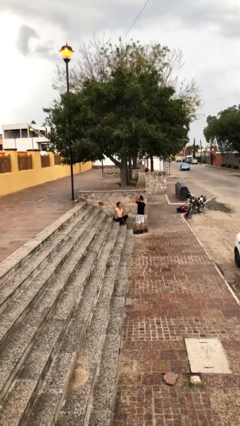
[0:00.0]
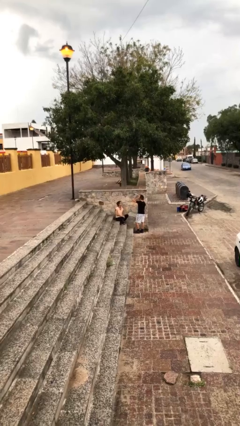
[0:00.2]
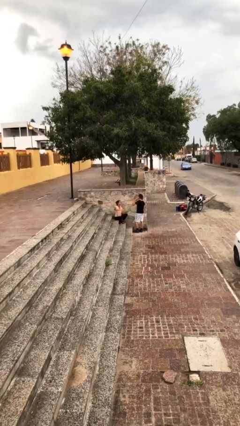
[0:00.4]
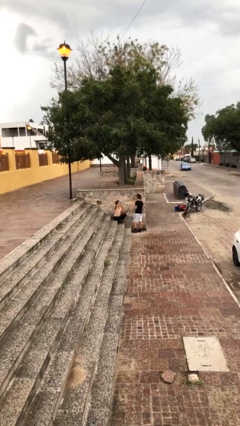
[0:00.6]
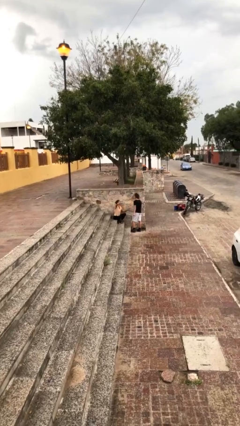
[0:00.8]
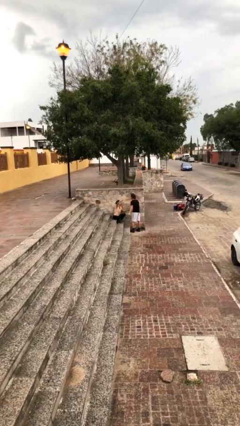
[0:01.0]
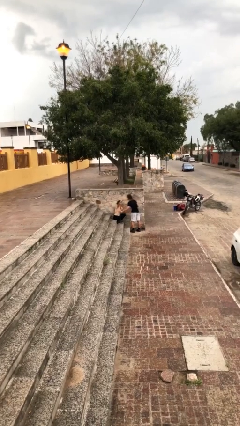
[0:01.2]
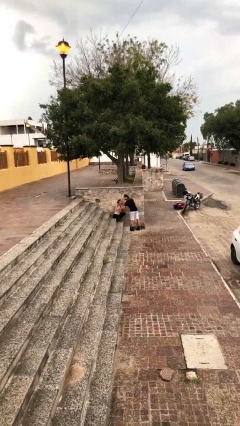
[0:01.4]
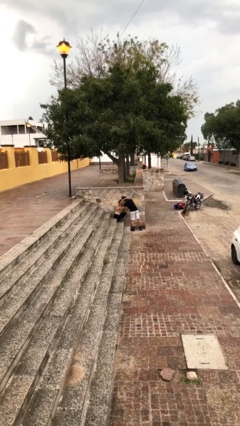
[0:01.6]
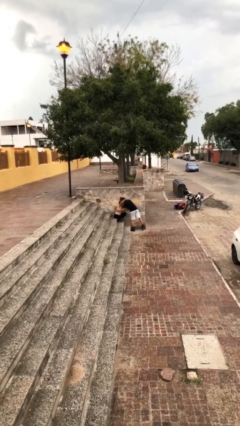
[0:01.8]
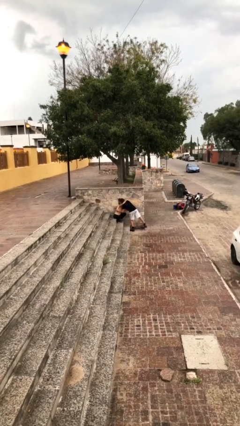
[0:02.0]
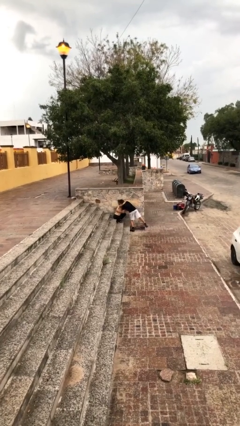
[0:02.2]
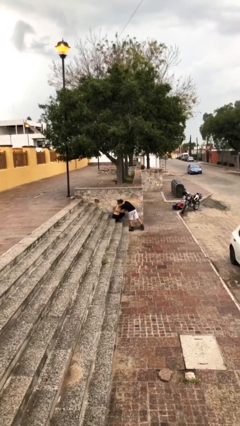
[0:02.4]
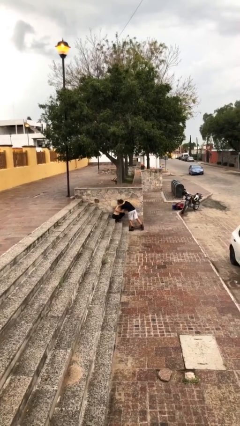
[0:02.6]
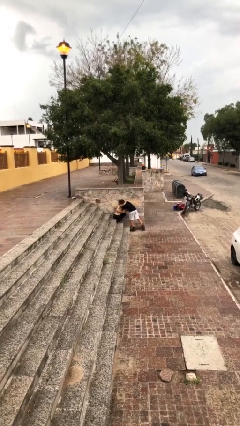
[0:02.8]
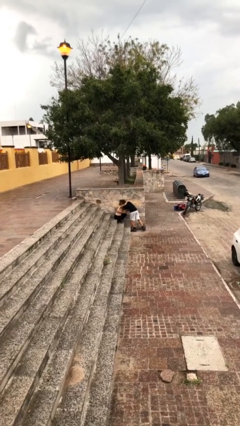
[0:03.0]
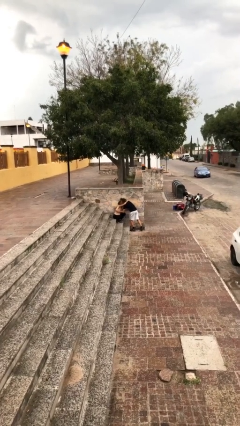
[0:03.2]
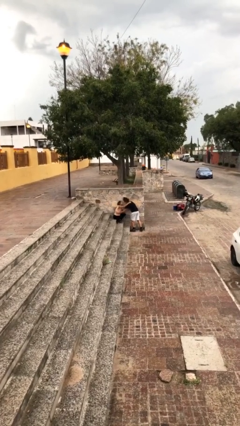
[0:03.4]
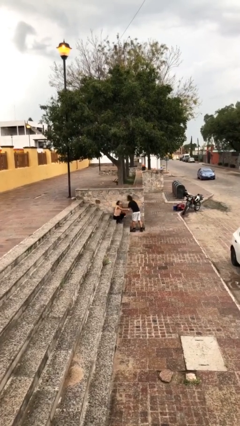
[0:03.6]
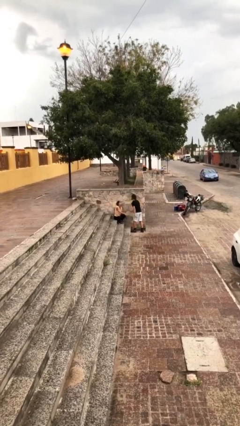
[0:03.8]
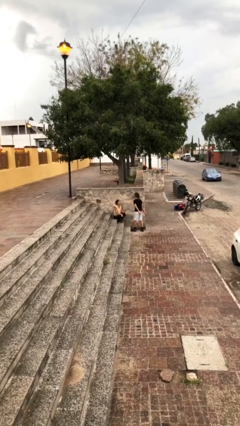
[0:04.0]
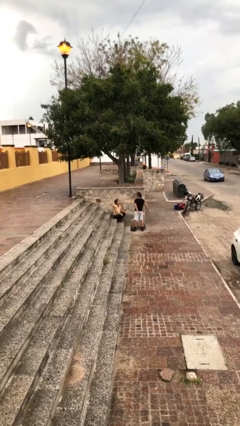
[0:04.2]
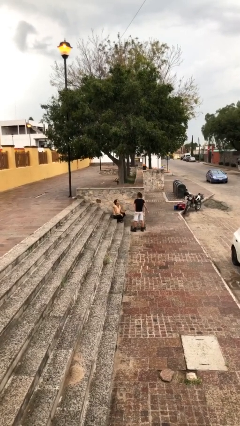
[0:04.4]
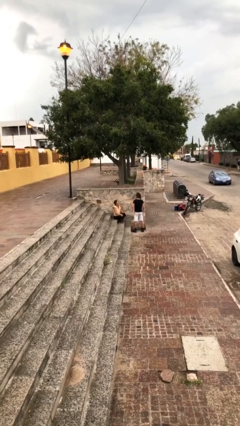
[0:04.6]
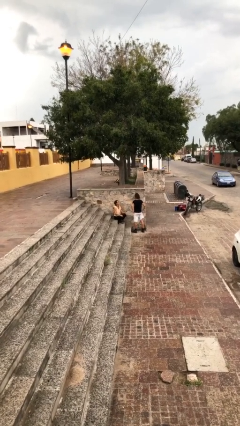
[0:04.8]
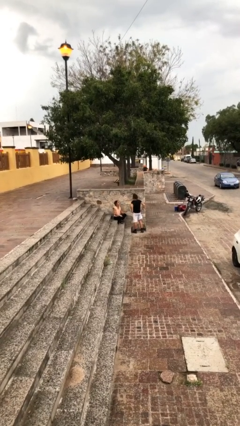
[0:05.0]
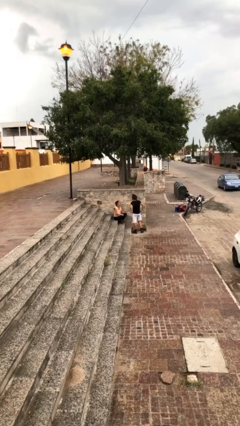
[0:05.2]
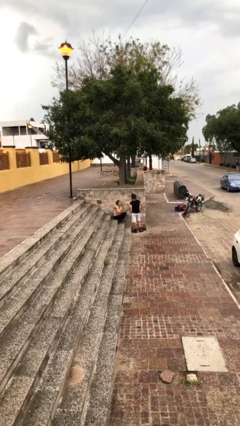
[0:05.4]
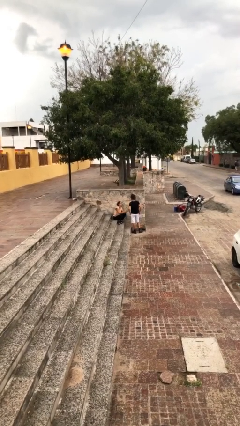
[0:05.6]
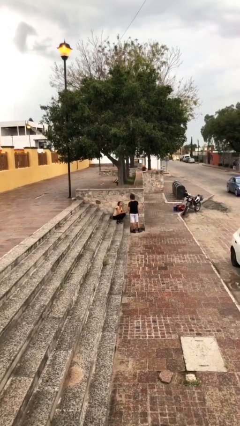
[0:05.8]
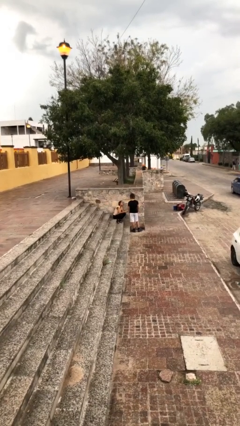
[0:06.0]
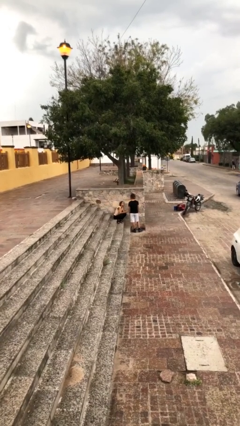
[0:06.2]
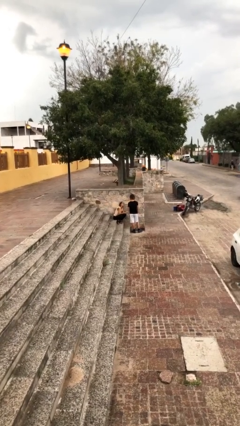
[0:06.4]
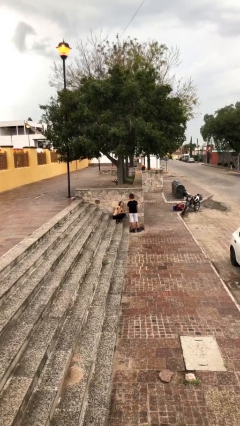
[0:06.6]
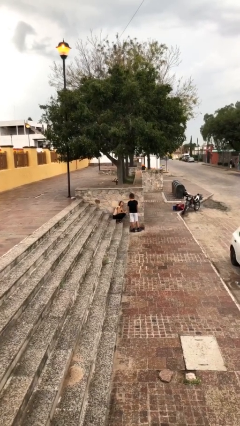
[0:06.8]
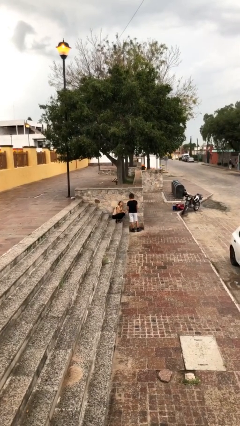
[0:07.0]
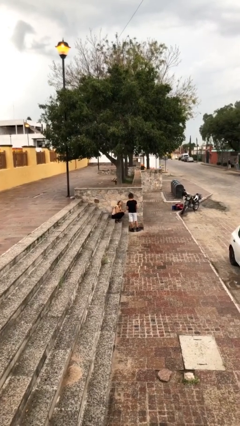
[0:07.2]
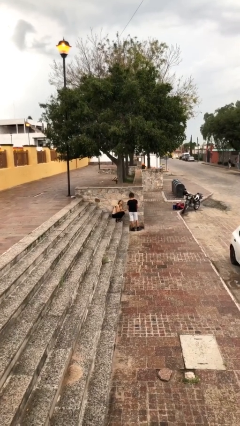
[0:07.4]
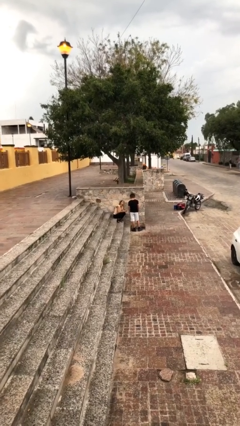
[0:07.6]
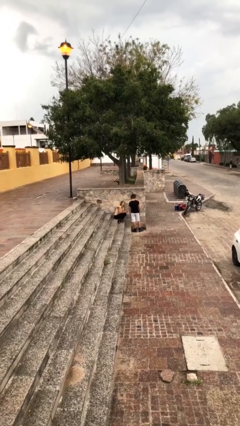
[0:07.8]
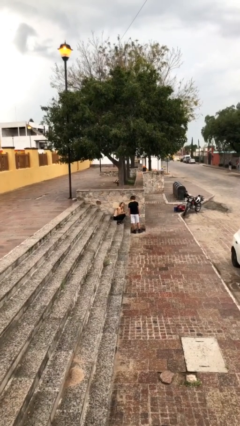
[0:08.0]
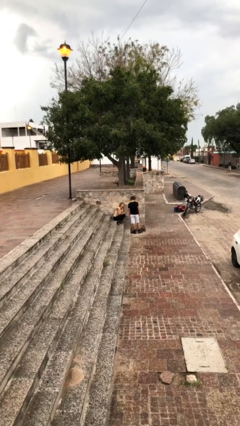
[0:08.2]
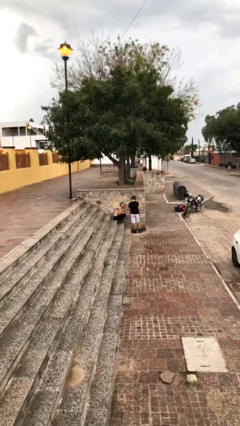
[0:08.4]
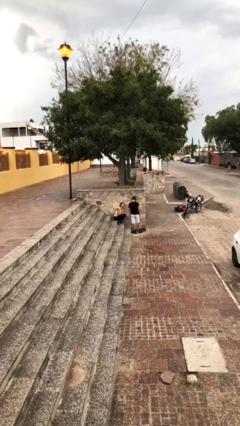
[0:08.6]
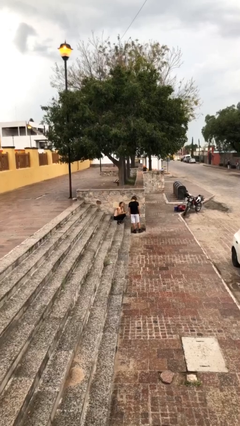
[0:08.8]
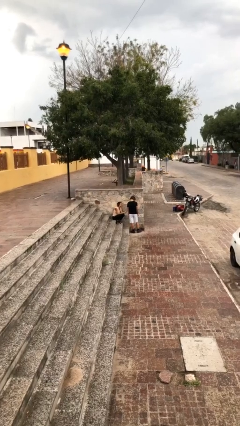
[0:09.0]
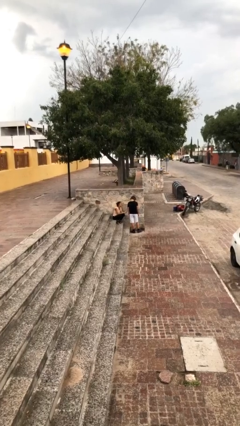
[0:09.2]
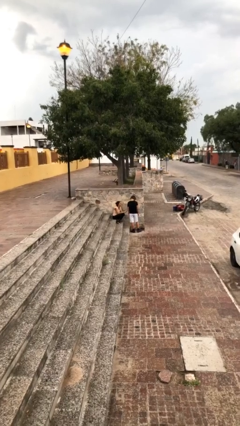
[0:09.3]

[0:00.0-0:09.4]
person embraces person

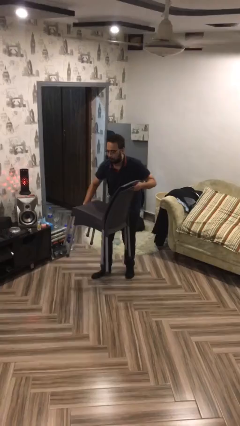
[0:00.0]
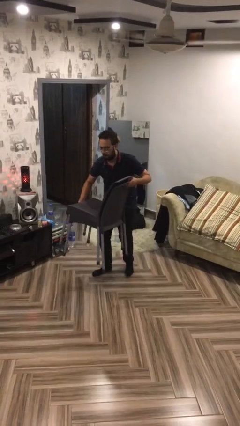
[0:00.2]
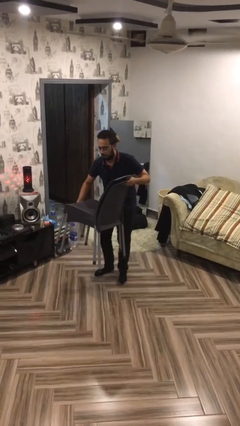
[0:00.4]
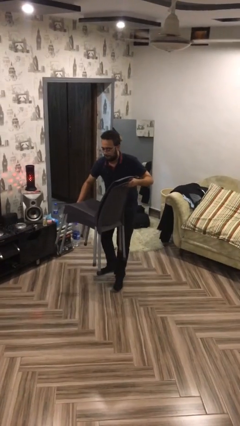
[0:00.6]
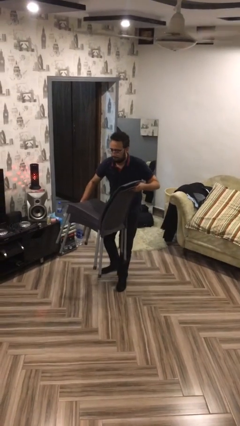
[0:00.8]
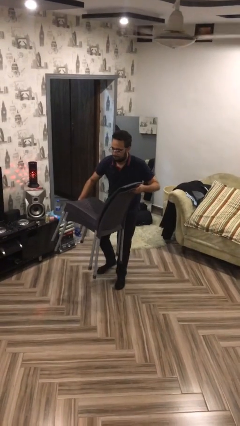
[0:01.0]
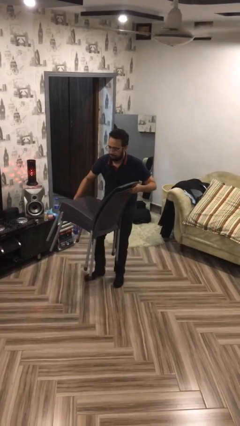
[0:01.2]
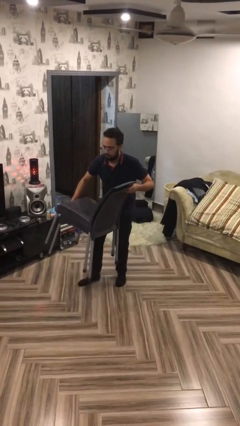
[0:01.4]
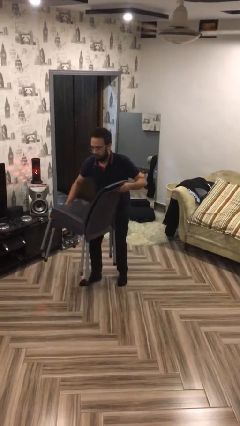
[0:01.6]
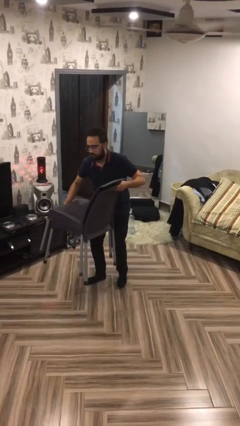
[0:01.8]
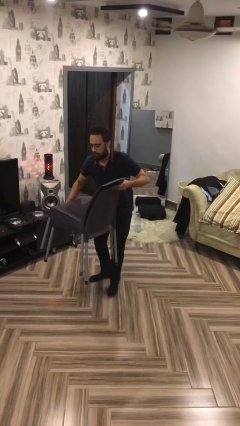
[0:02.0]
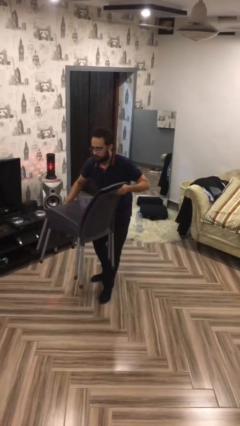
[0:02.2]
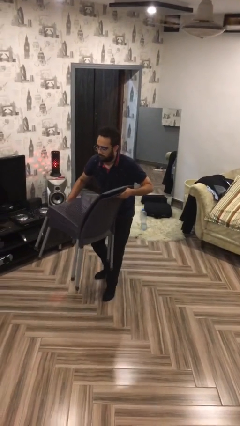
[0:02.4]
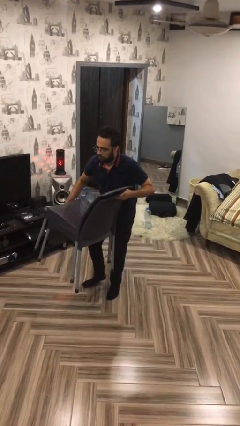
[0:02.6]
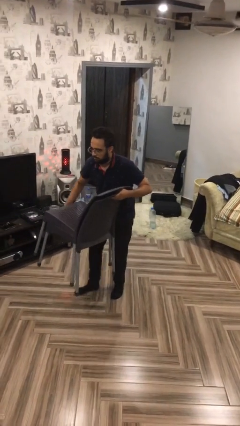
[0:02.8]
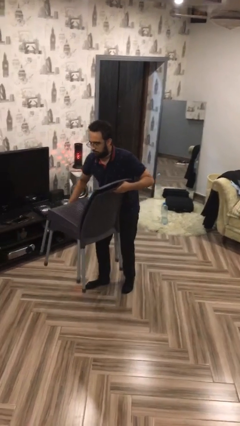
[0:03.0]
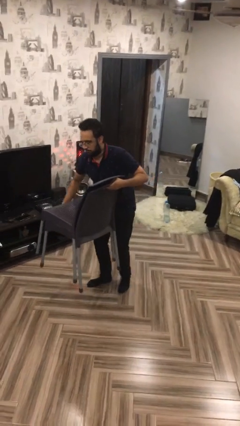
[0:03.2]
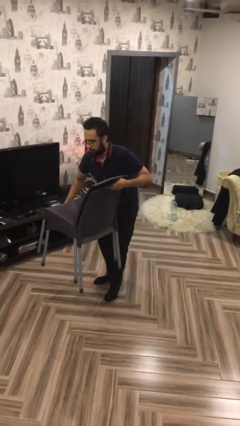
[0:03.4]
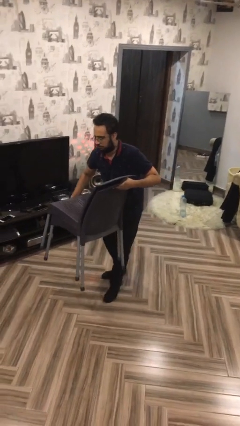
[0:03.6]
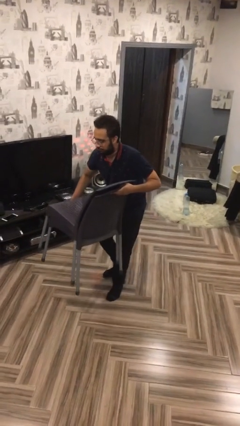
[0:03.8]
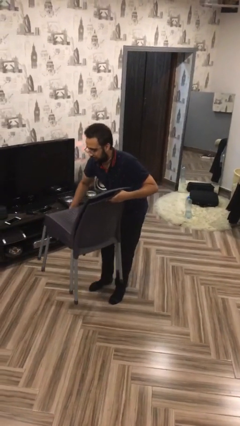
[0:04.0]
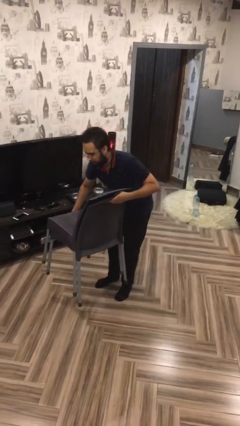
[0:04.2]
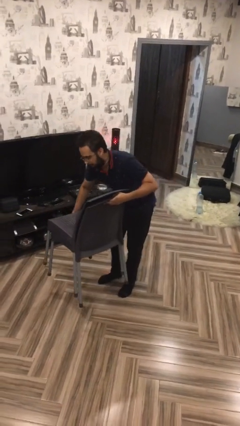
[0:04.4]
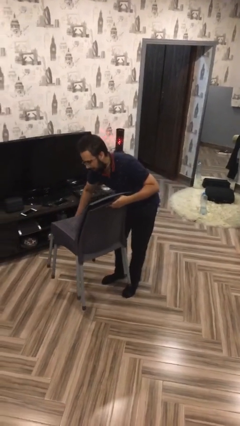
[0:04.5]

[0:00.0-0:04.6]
person carries heavy object

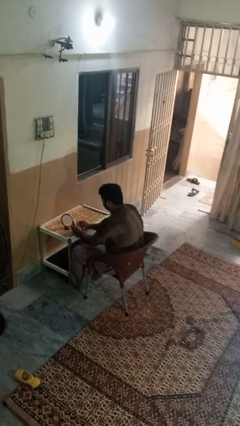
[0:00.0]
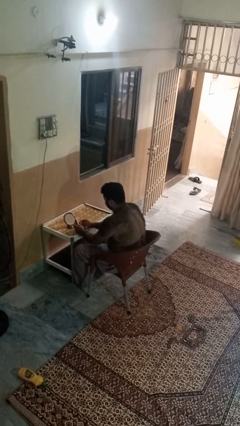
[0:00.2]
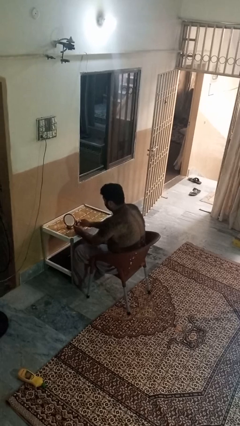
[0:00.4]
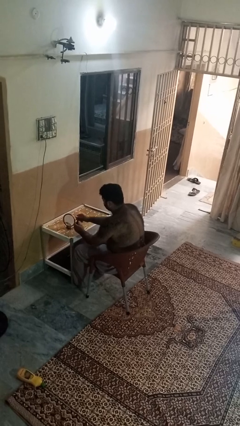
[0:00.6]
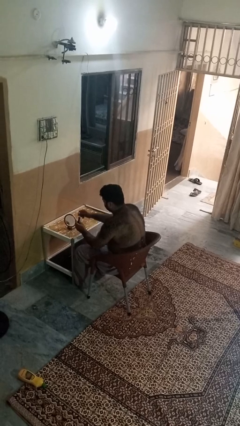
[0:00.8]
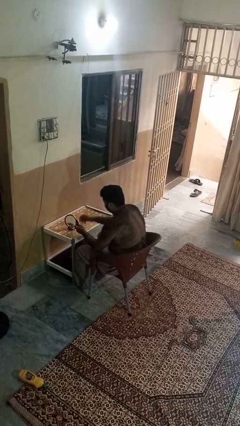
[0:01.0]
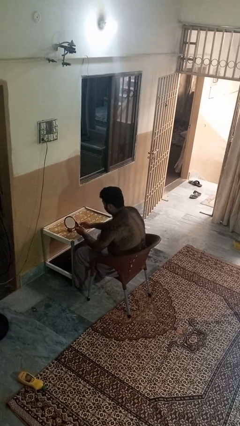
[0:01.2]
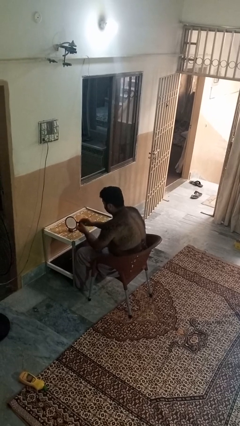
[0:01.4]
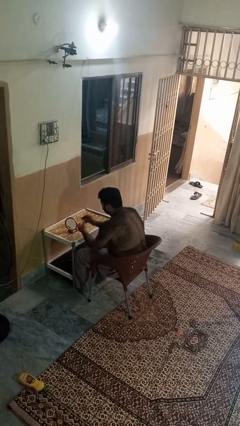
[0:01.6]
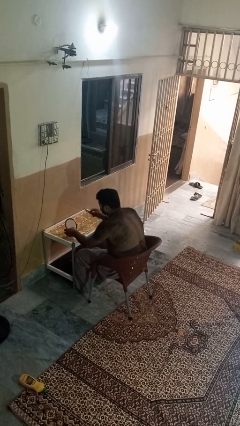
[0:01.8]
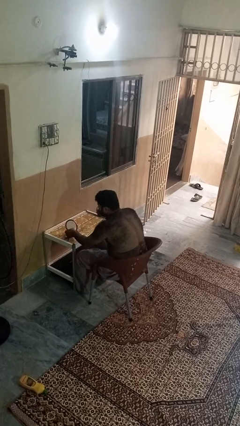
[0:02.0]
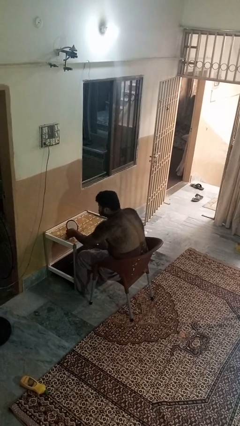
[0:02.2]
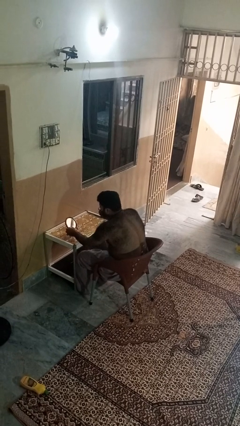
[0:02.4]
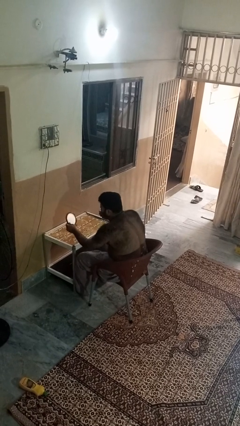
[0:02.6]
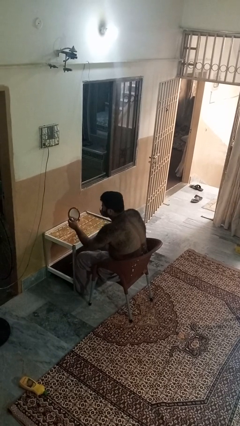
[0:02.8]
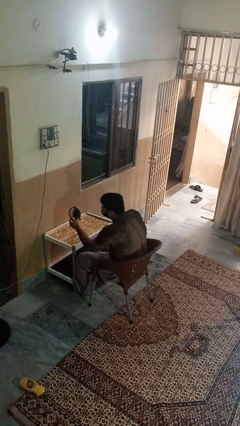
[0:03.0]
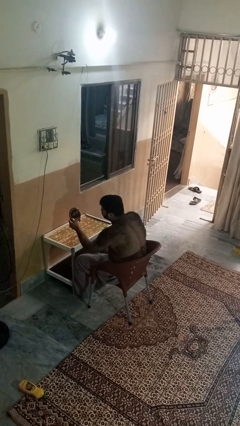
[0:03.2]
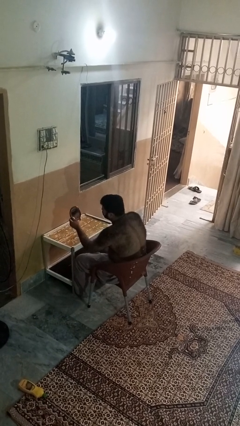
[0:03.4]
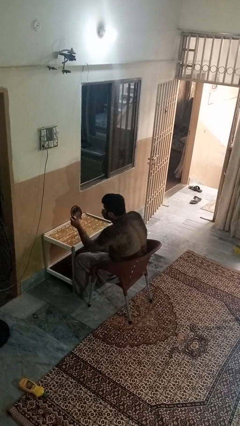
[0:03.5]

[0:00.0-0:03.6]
person applies lip makeup

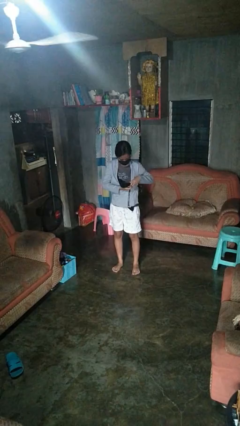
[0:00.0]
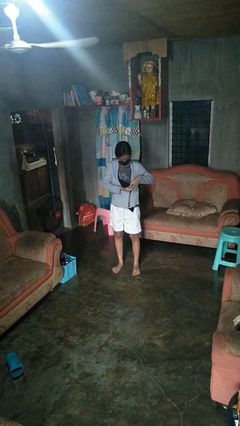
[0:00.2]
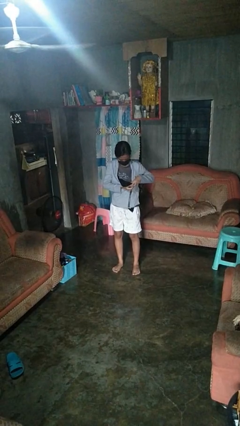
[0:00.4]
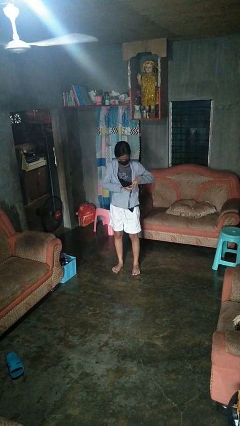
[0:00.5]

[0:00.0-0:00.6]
person unzips jacket
